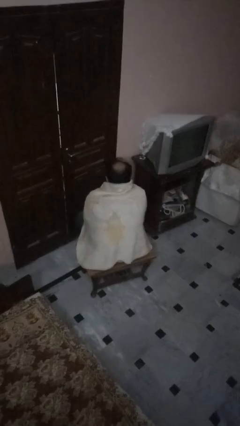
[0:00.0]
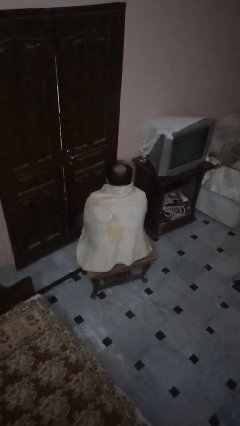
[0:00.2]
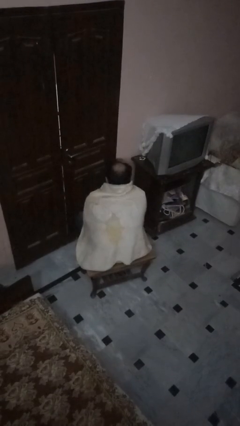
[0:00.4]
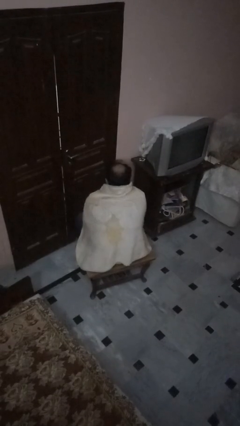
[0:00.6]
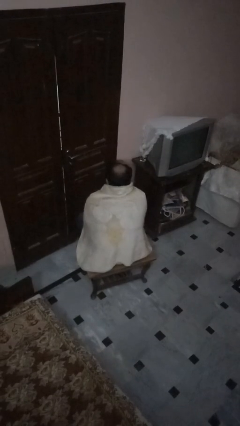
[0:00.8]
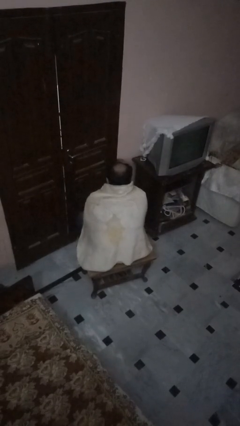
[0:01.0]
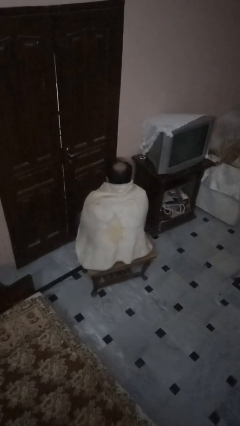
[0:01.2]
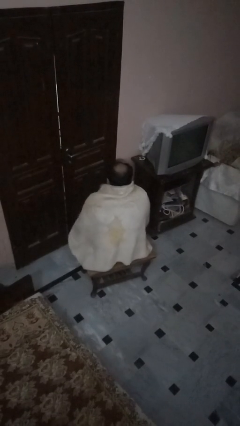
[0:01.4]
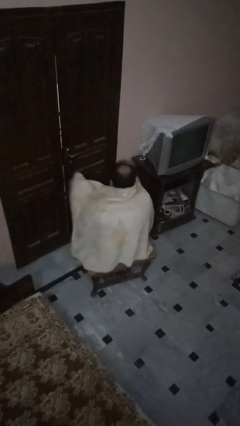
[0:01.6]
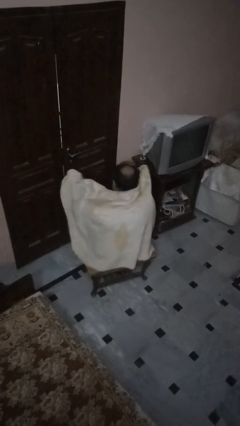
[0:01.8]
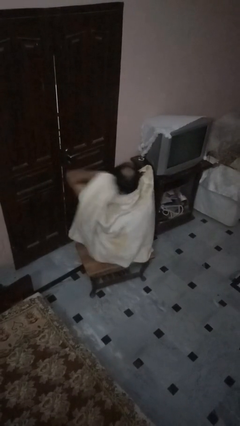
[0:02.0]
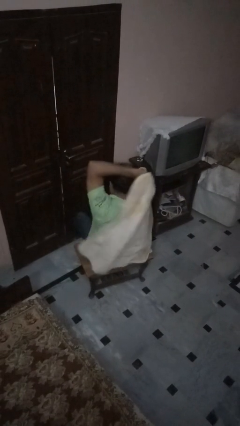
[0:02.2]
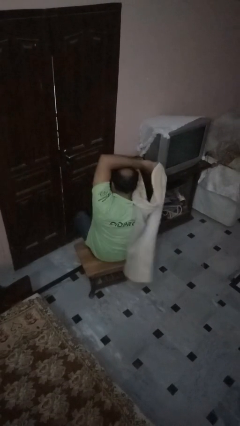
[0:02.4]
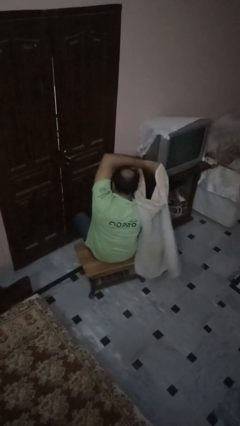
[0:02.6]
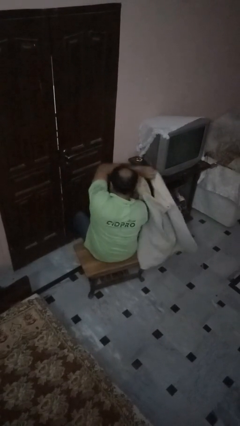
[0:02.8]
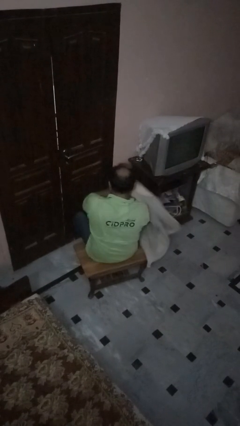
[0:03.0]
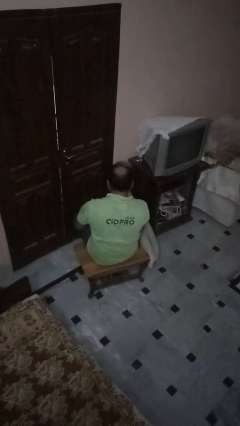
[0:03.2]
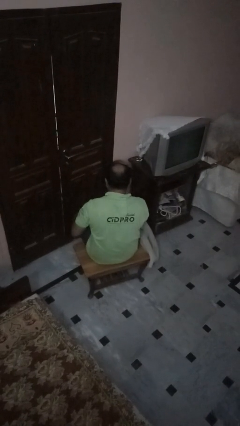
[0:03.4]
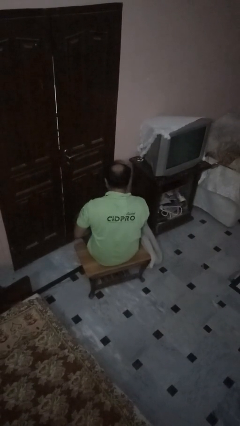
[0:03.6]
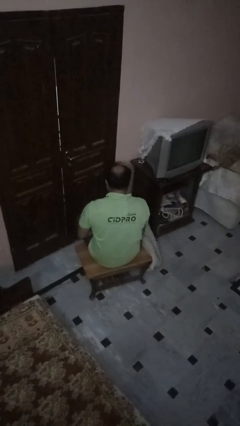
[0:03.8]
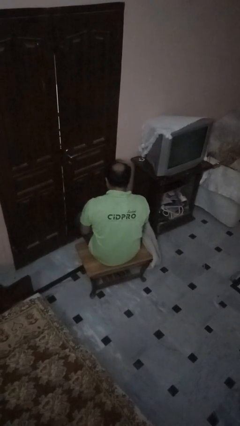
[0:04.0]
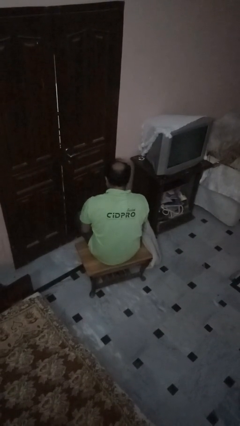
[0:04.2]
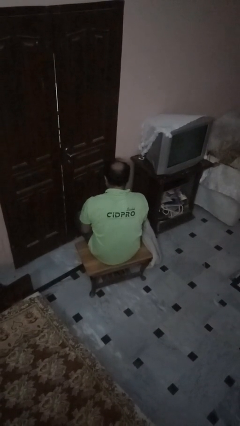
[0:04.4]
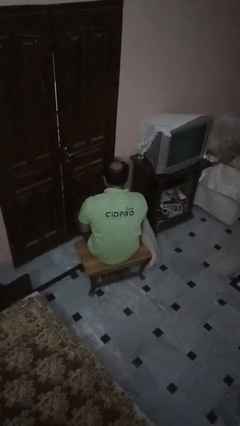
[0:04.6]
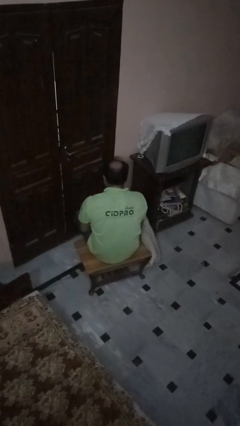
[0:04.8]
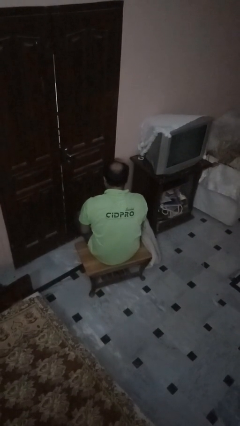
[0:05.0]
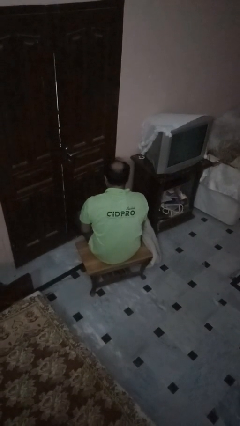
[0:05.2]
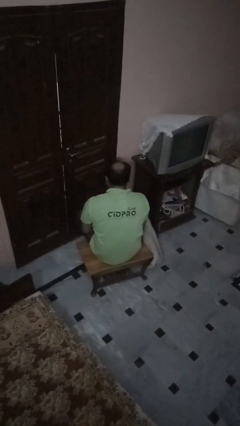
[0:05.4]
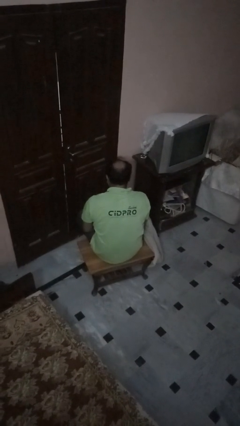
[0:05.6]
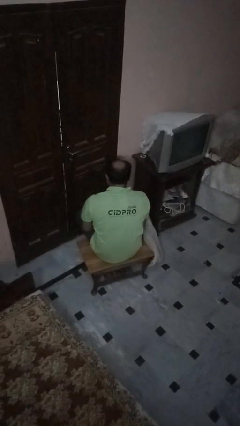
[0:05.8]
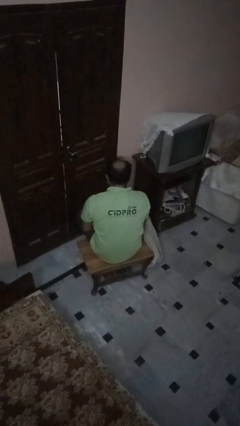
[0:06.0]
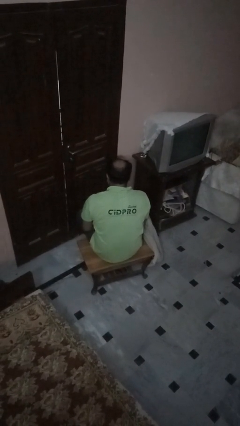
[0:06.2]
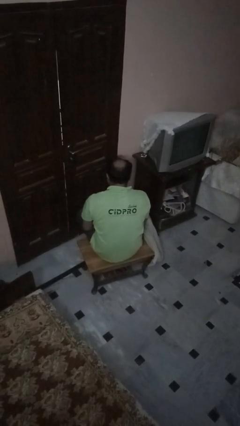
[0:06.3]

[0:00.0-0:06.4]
person uncovers with blanket

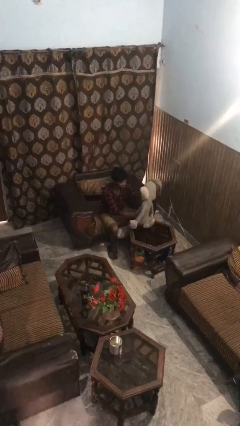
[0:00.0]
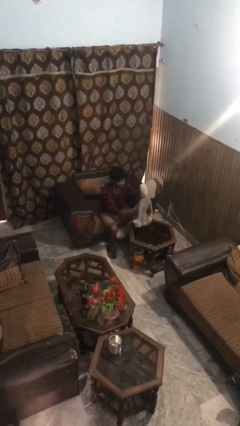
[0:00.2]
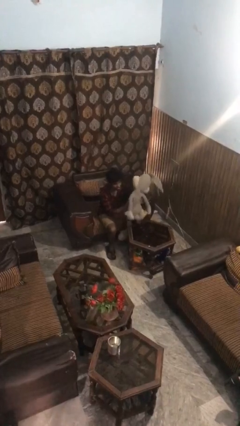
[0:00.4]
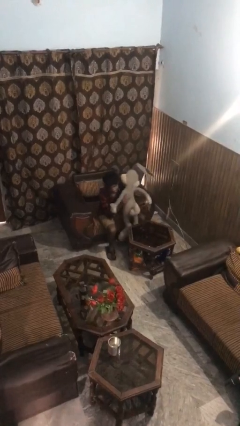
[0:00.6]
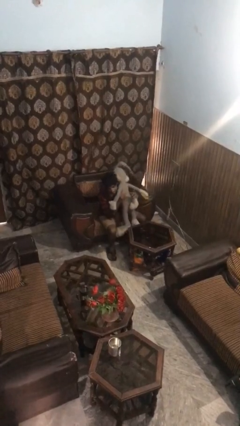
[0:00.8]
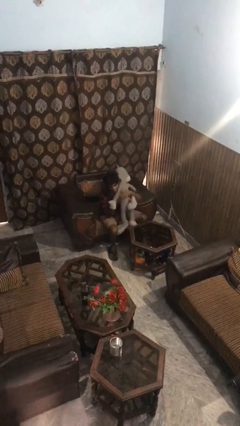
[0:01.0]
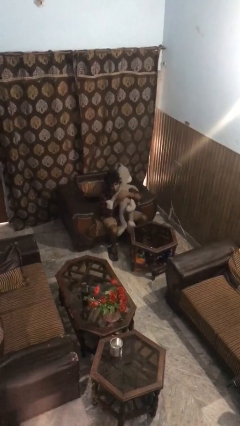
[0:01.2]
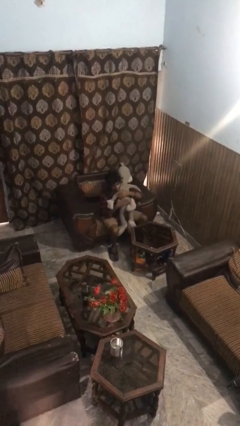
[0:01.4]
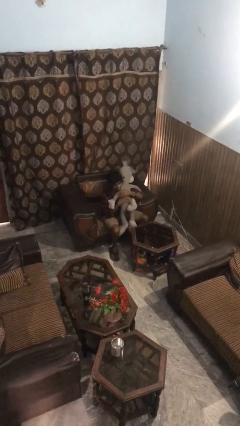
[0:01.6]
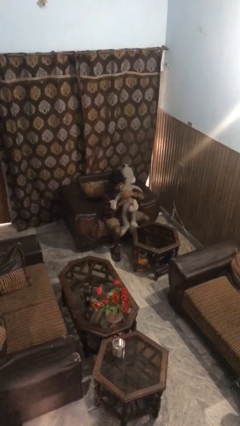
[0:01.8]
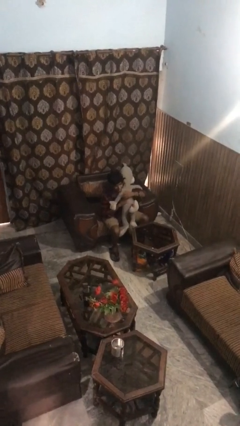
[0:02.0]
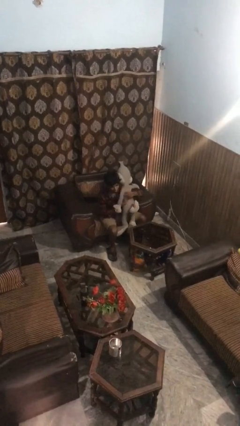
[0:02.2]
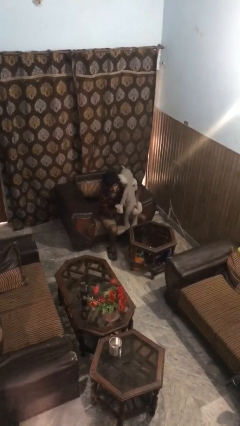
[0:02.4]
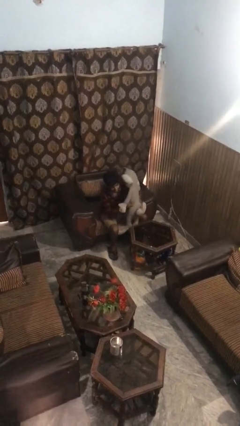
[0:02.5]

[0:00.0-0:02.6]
person hugs stuffed animal

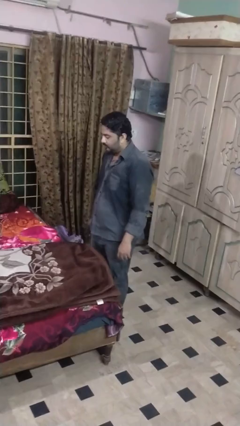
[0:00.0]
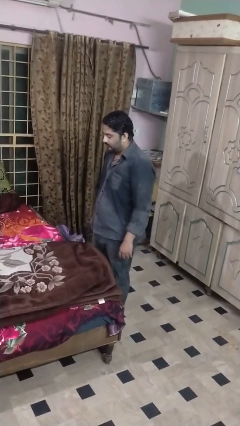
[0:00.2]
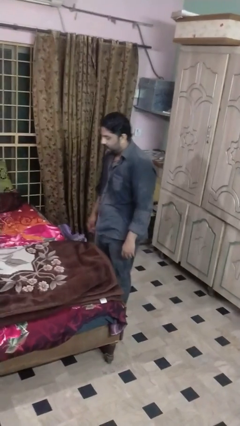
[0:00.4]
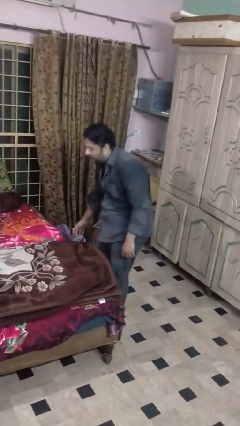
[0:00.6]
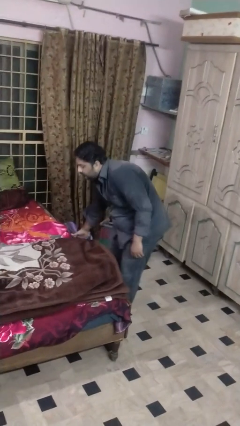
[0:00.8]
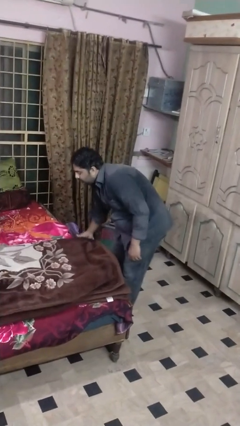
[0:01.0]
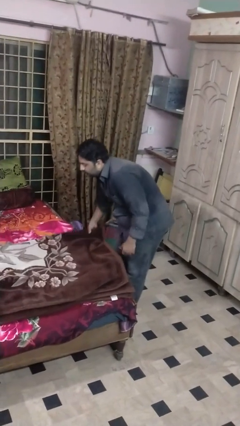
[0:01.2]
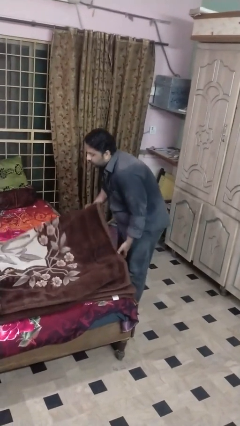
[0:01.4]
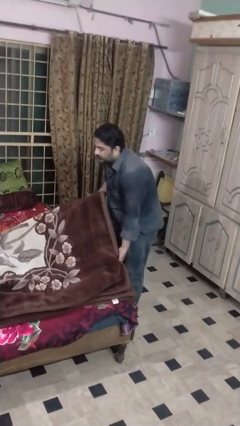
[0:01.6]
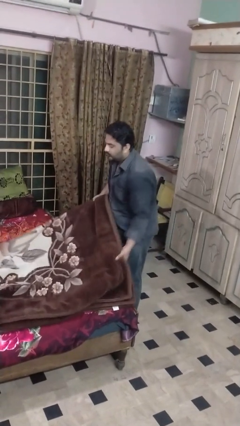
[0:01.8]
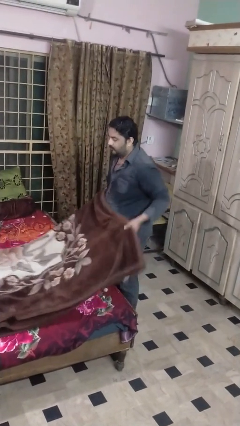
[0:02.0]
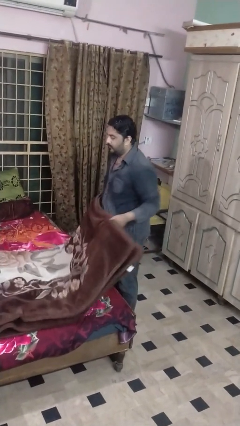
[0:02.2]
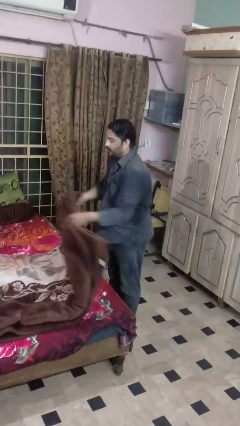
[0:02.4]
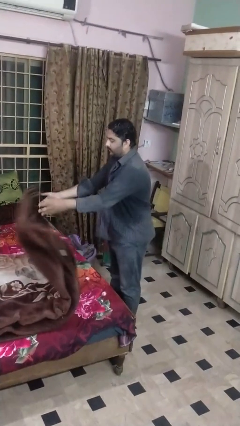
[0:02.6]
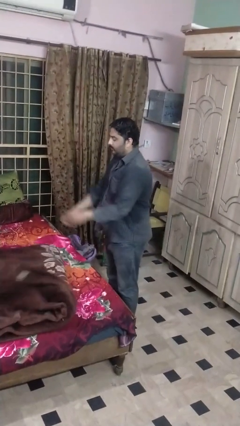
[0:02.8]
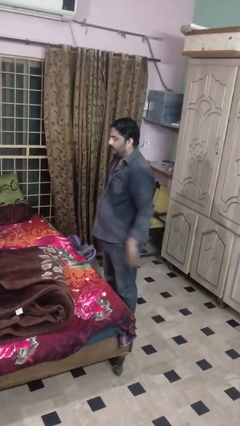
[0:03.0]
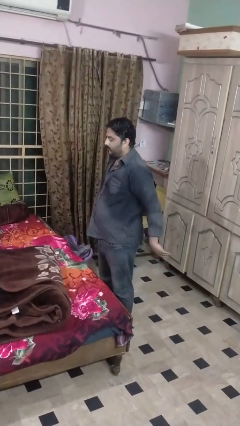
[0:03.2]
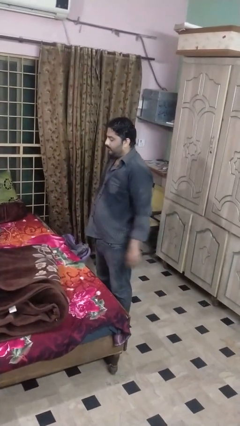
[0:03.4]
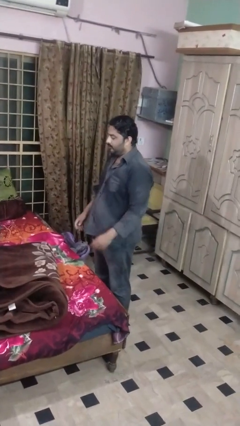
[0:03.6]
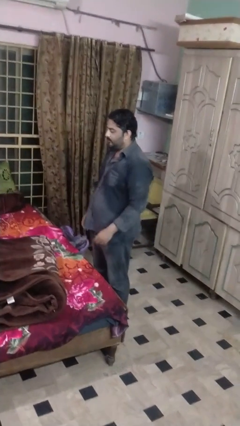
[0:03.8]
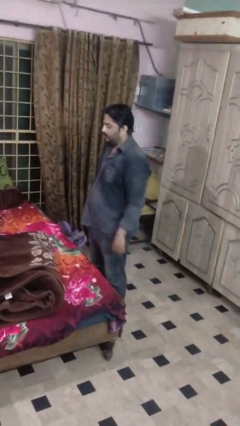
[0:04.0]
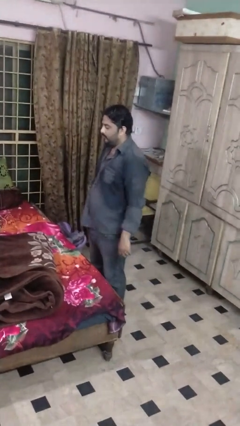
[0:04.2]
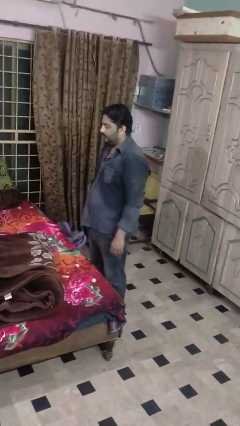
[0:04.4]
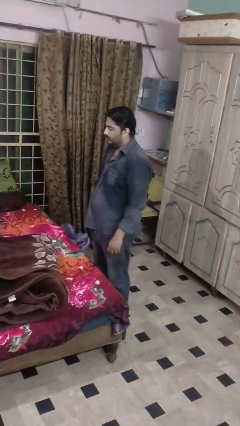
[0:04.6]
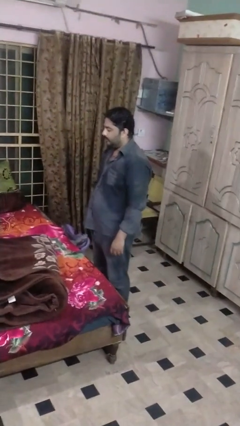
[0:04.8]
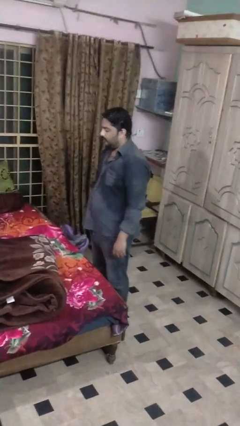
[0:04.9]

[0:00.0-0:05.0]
person folds blanket

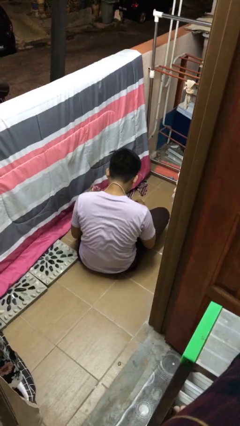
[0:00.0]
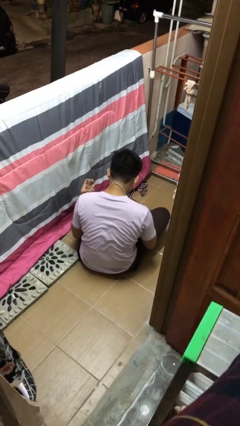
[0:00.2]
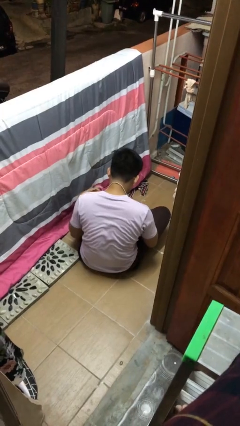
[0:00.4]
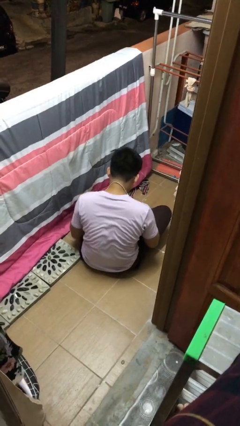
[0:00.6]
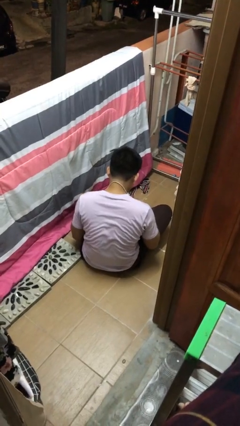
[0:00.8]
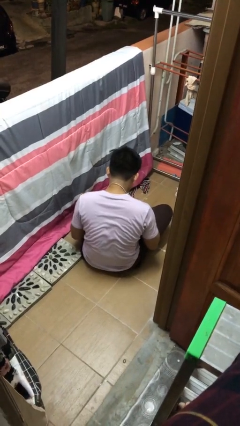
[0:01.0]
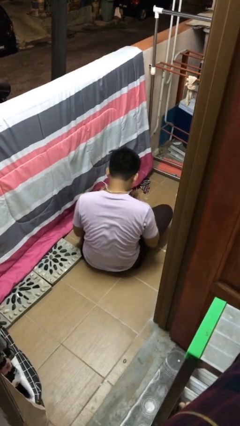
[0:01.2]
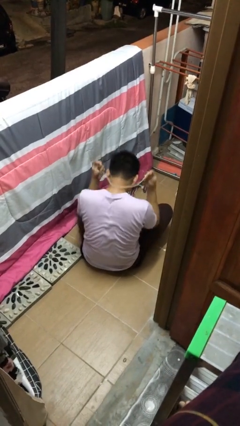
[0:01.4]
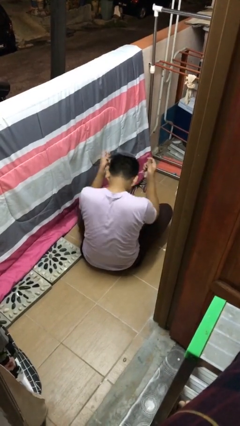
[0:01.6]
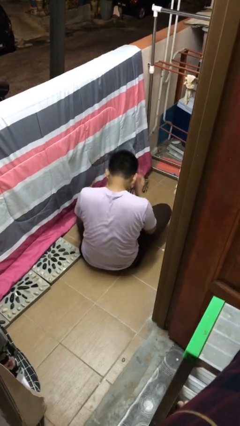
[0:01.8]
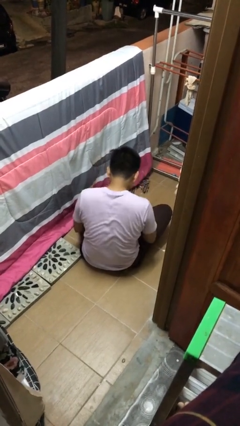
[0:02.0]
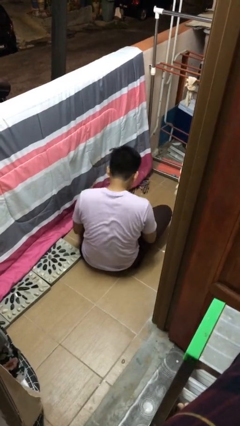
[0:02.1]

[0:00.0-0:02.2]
person takes off necklace

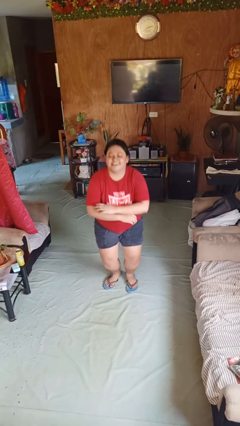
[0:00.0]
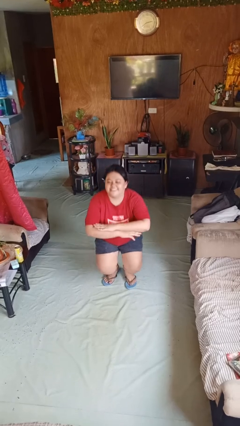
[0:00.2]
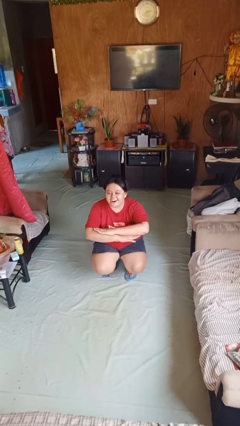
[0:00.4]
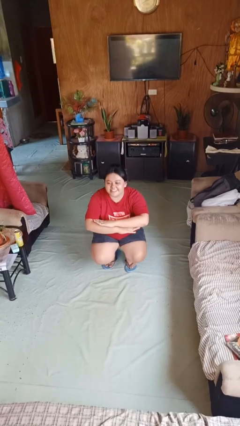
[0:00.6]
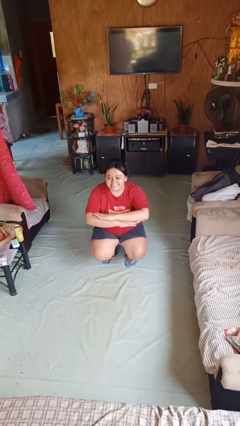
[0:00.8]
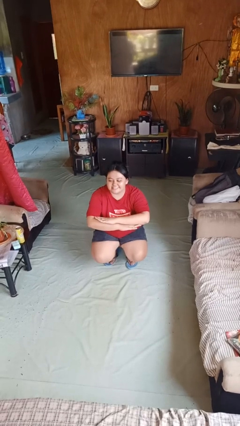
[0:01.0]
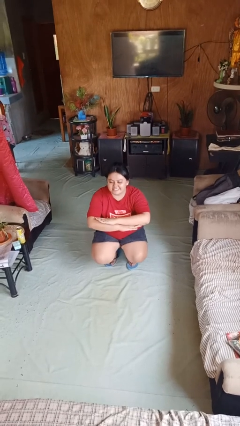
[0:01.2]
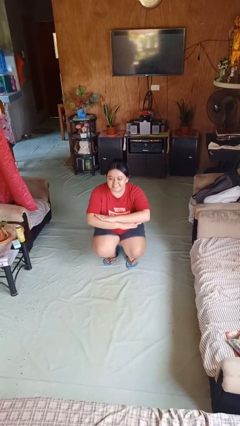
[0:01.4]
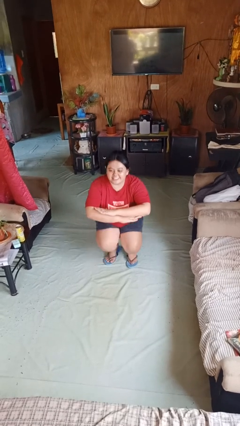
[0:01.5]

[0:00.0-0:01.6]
person squats
